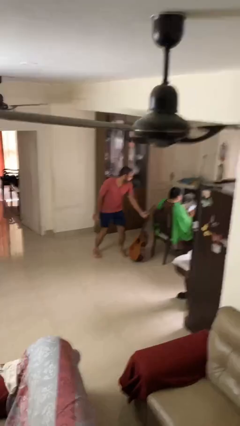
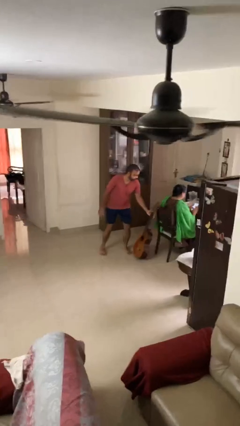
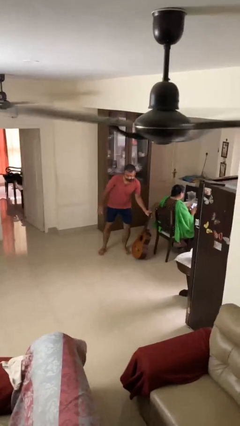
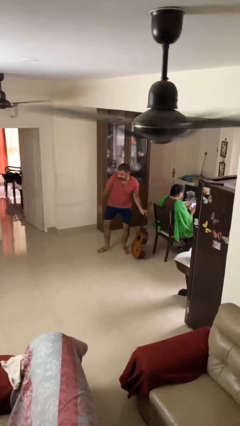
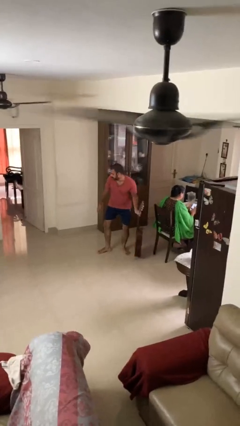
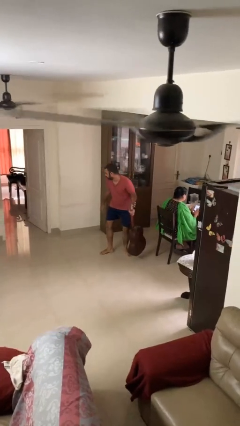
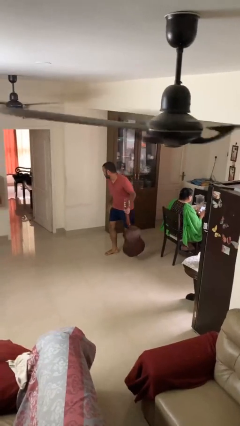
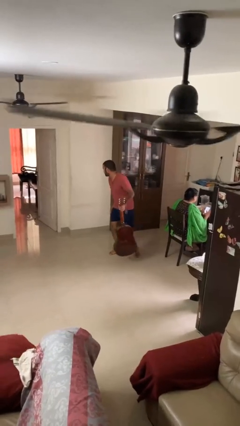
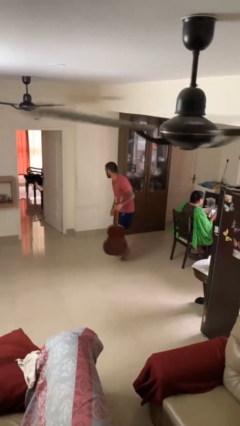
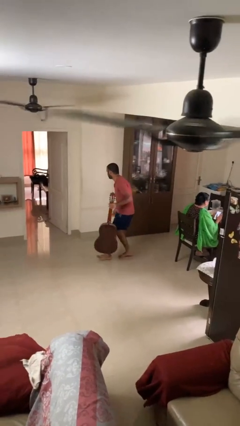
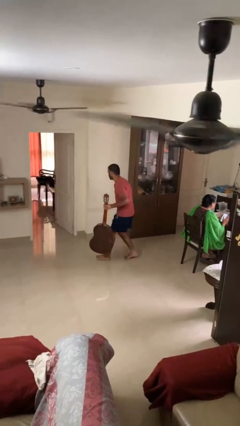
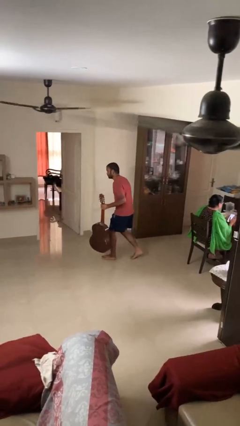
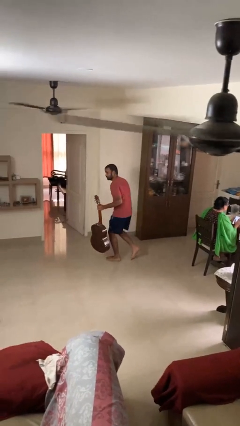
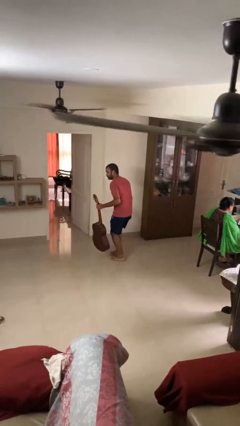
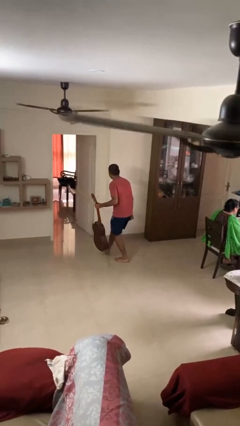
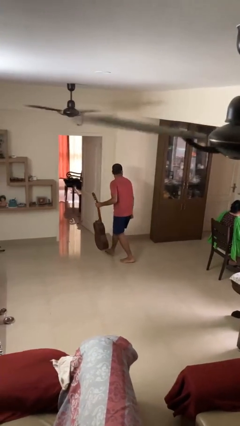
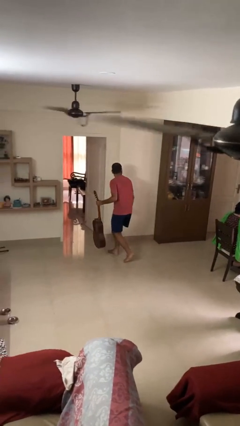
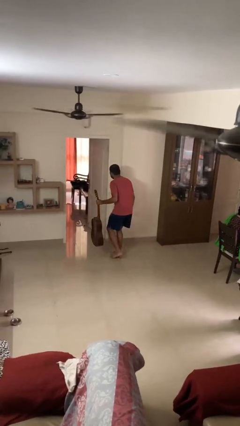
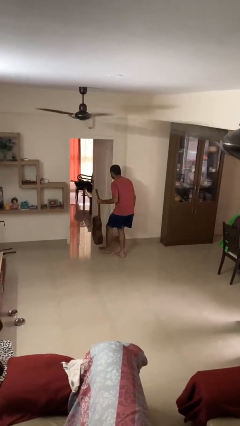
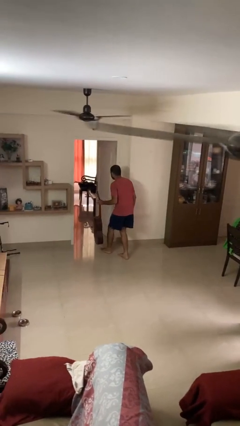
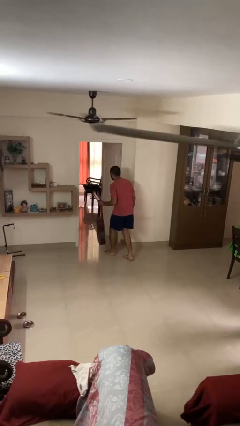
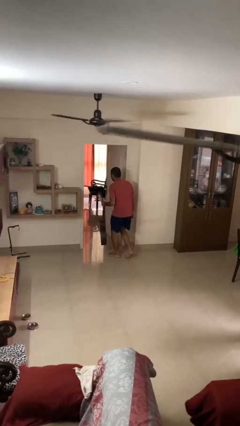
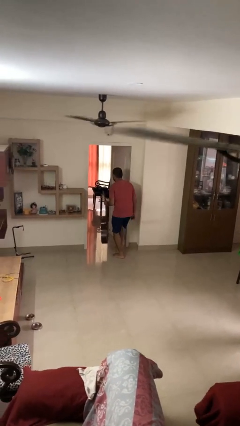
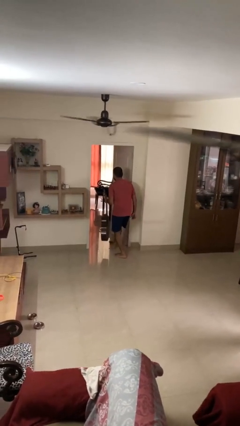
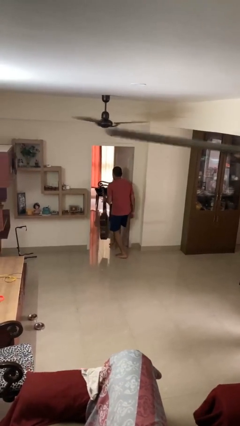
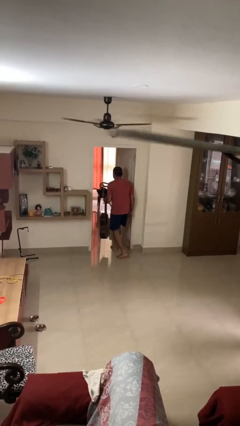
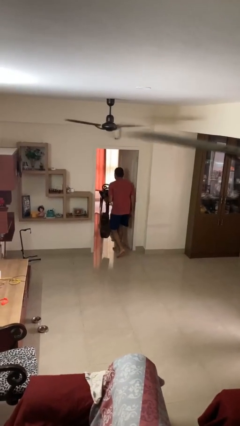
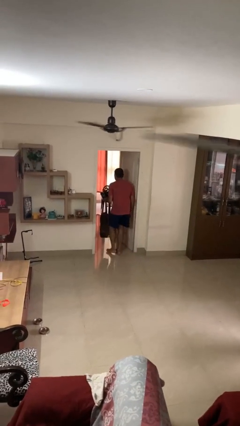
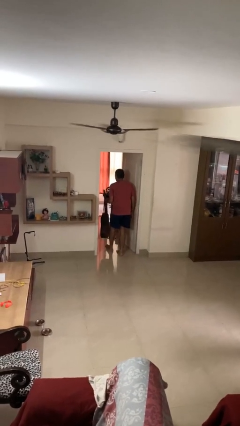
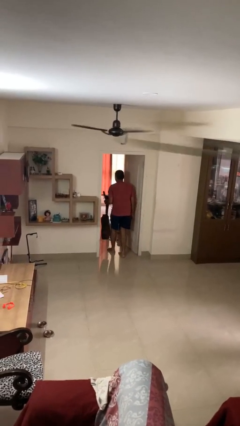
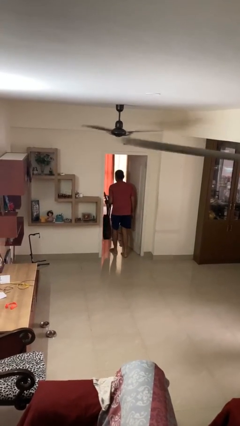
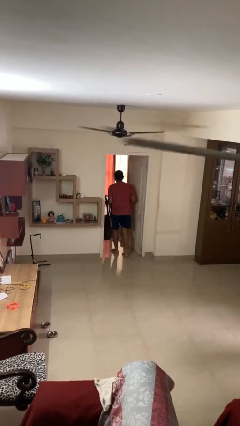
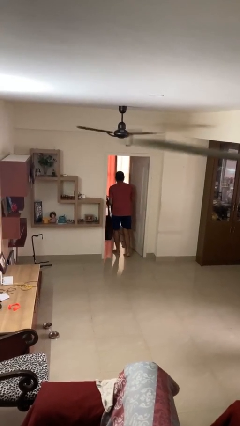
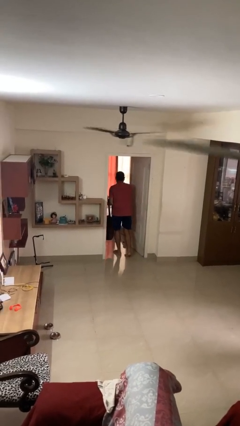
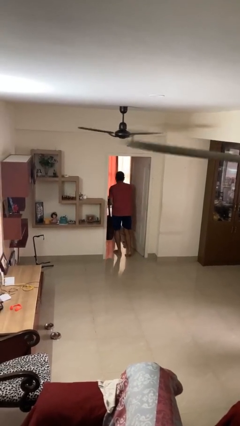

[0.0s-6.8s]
person steals object from person

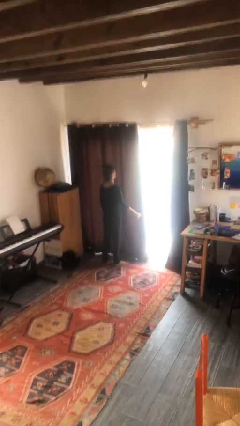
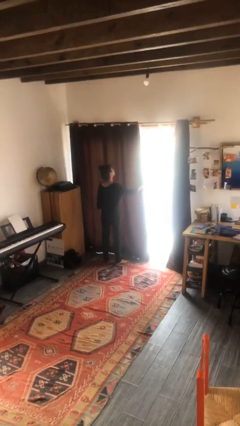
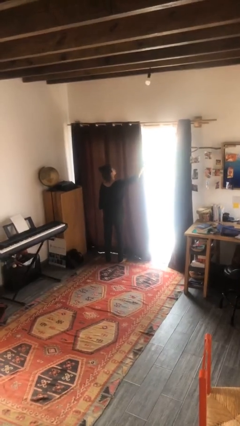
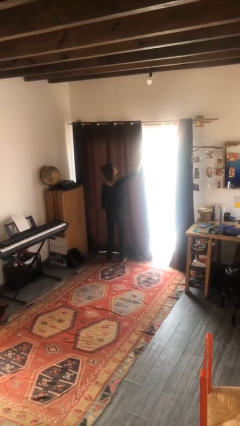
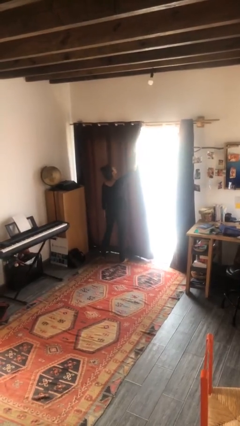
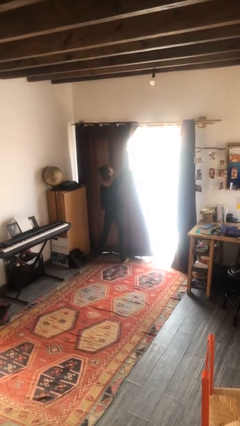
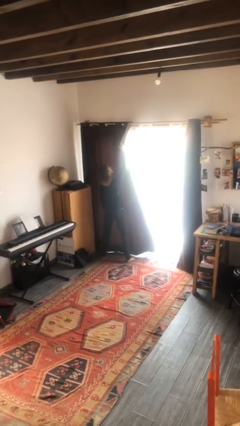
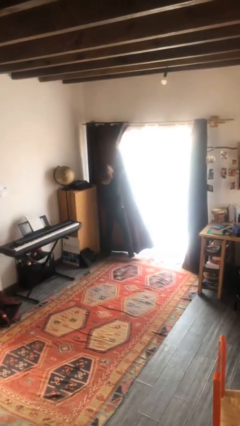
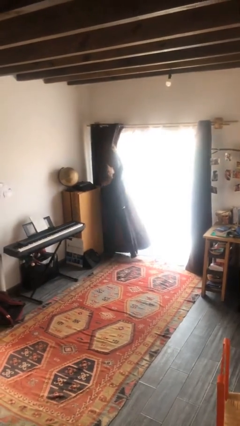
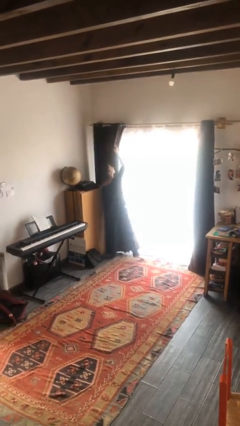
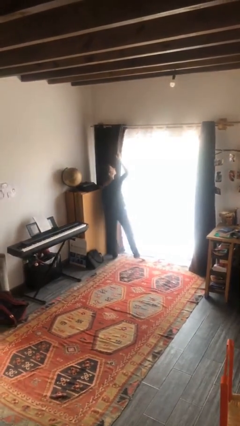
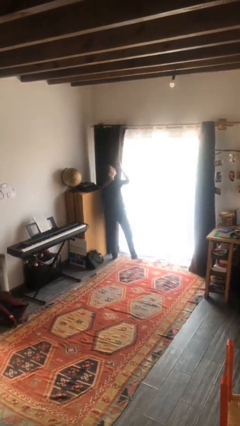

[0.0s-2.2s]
person opens curtains

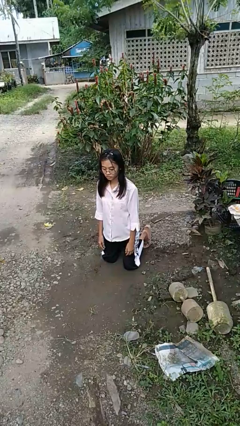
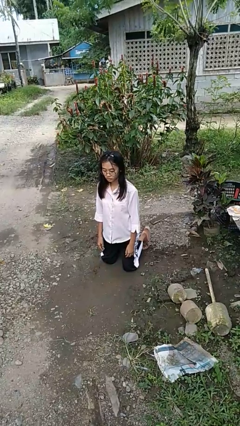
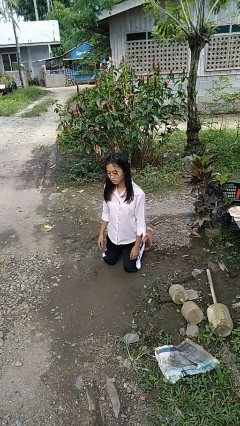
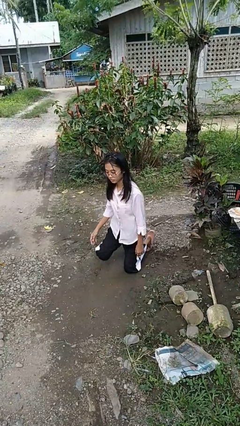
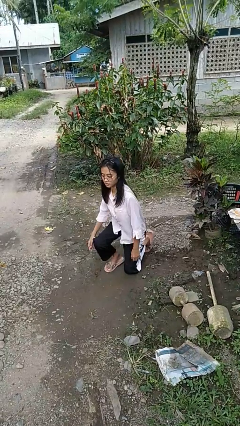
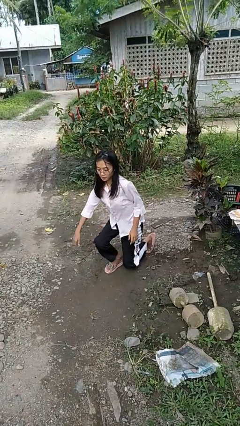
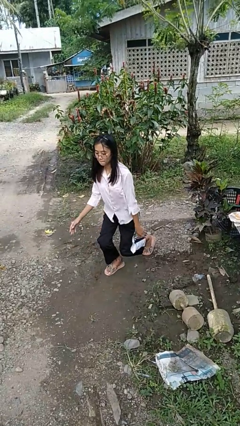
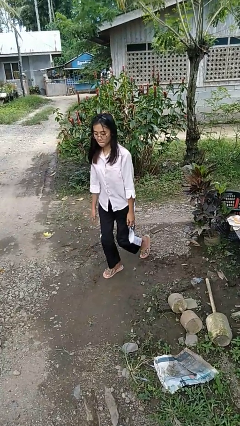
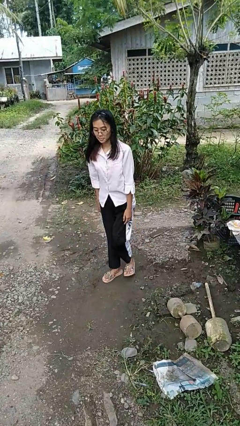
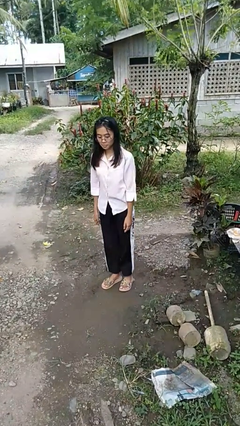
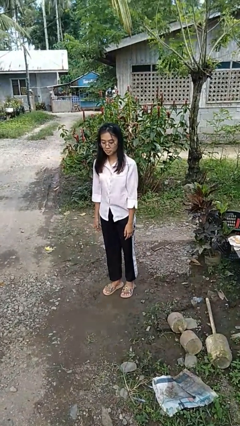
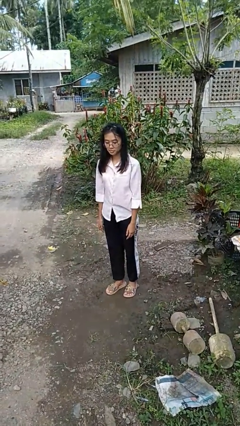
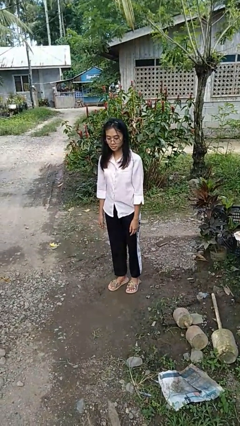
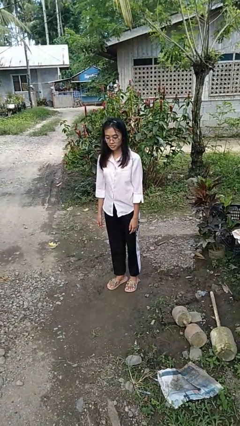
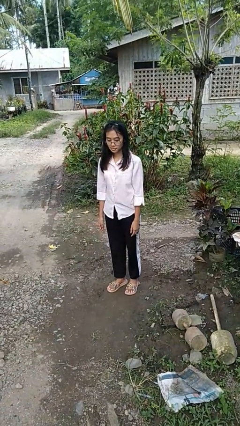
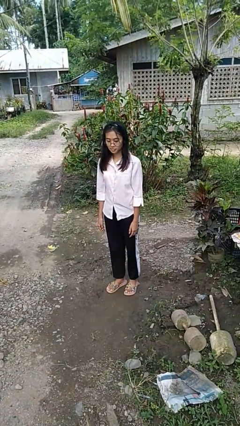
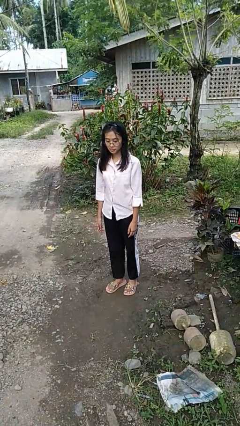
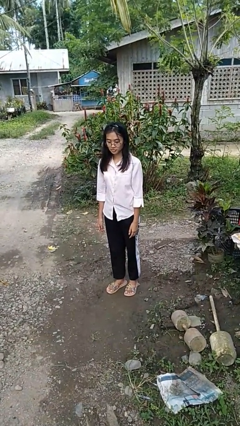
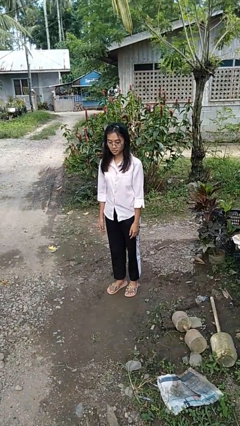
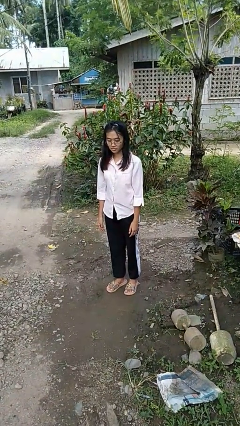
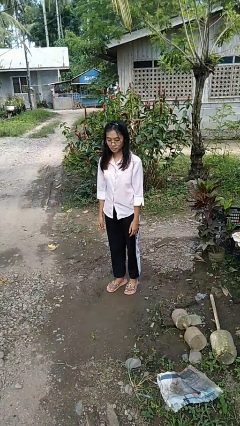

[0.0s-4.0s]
person stands up from floor

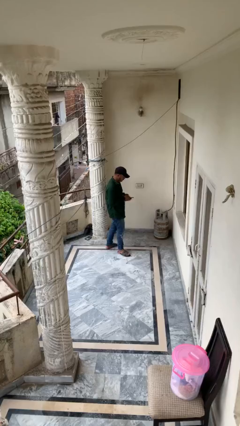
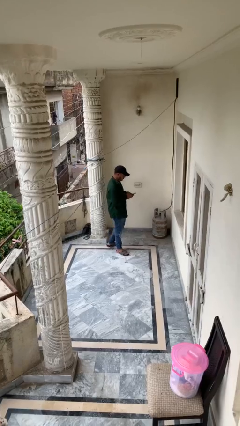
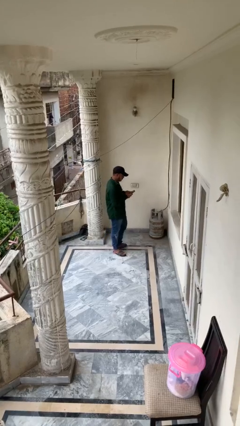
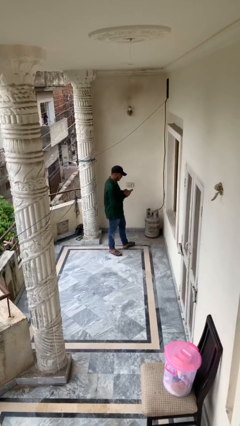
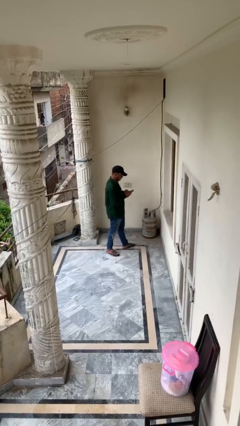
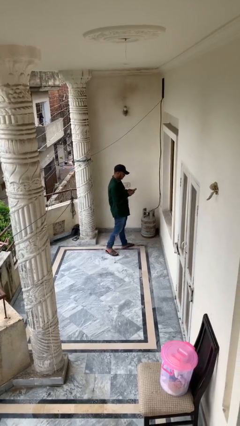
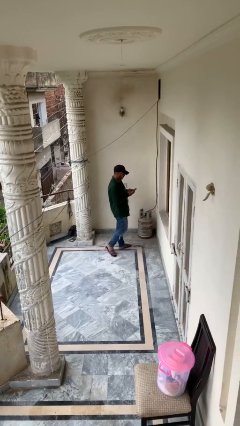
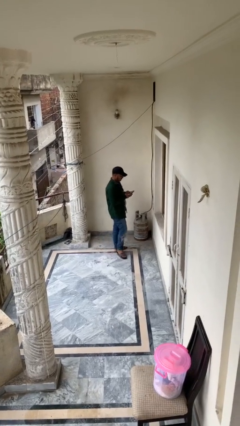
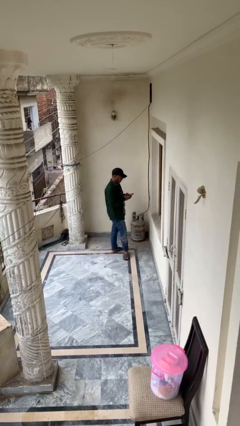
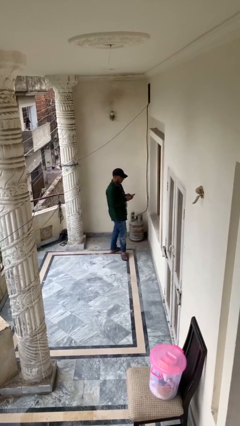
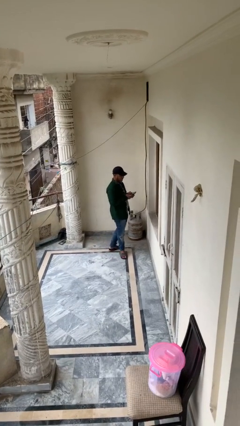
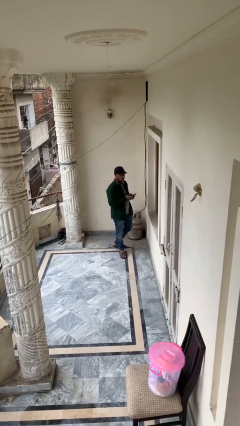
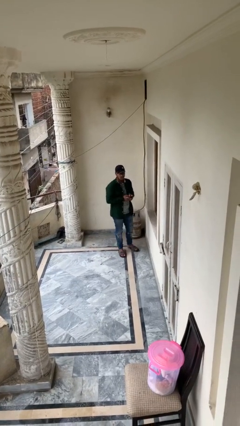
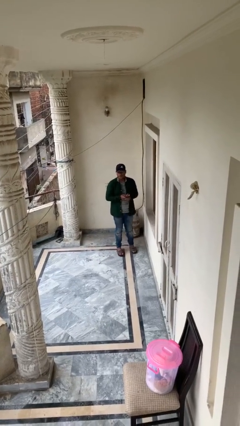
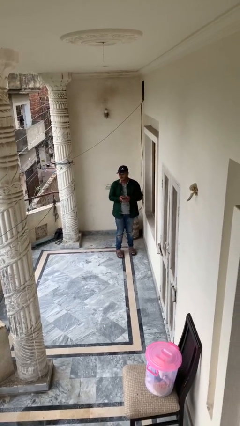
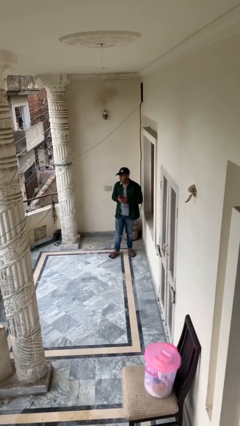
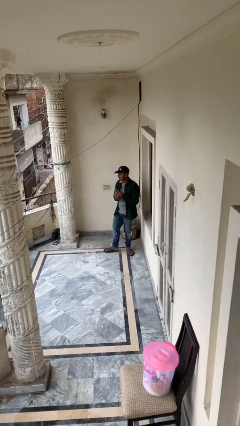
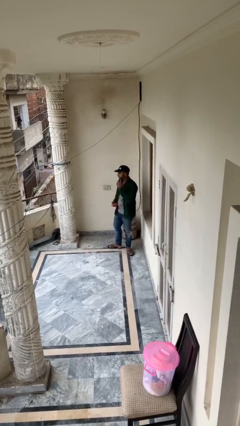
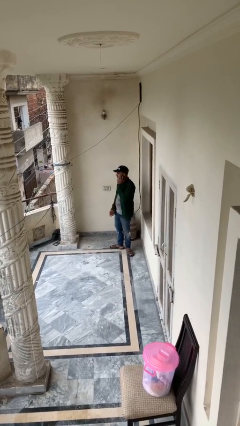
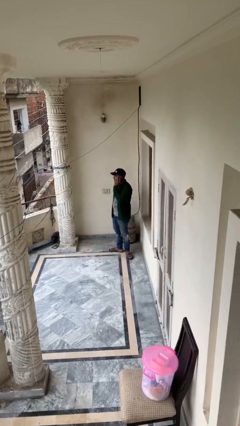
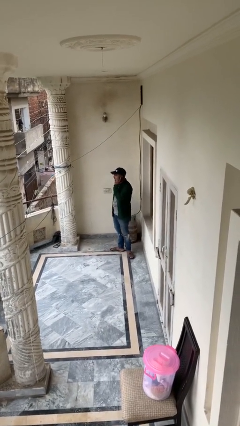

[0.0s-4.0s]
person texts on phone

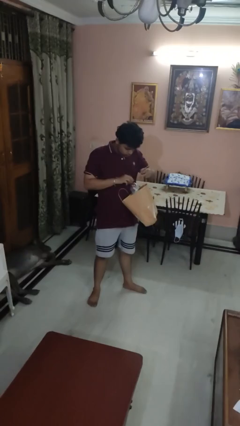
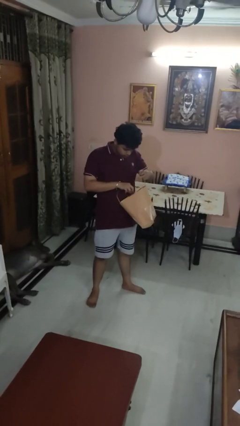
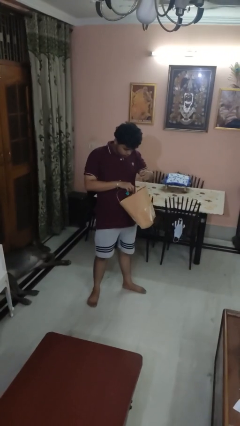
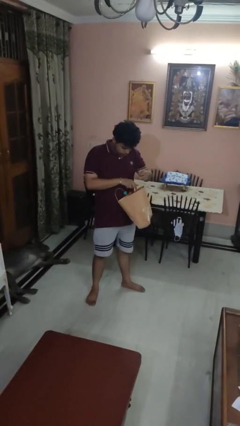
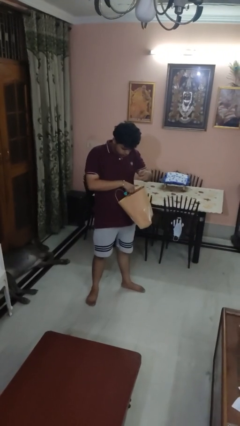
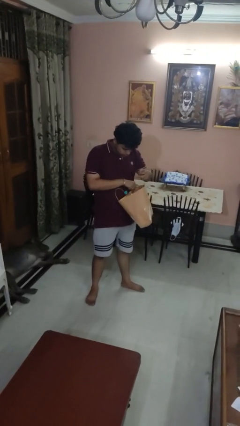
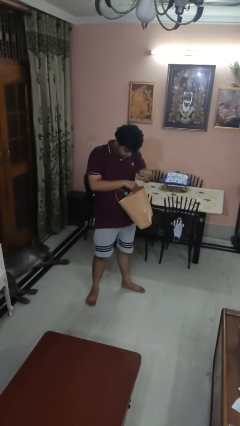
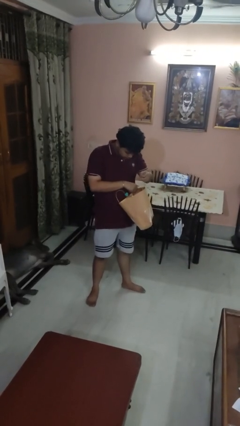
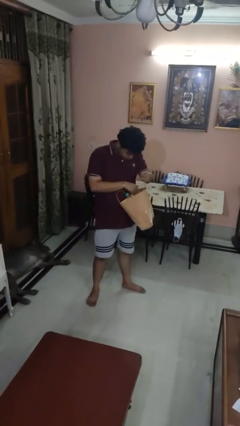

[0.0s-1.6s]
person puts object into bag
